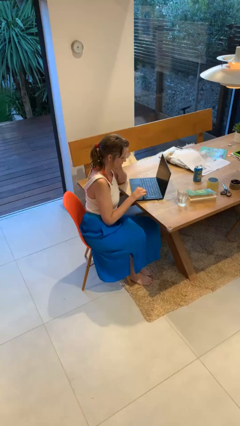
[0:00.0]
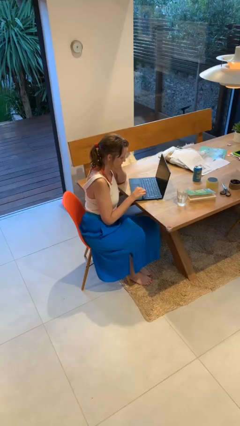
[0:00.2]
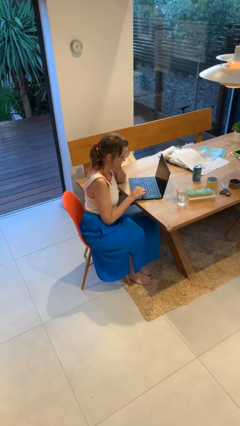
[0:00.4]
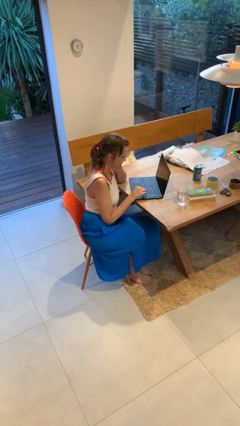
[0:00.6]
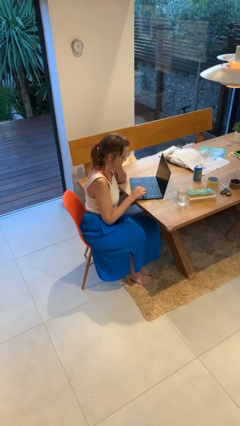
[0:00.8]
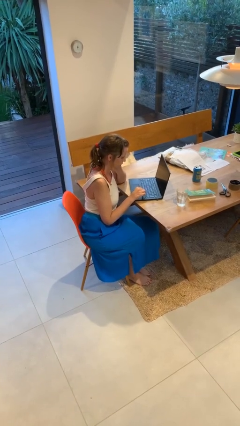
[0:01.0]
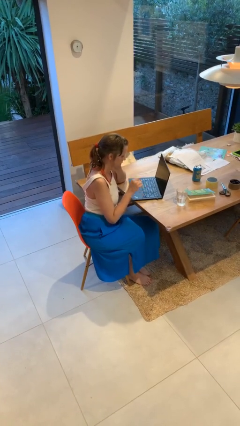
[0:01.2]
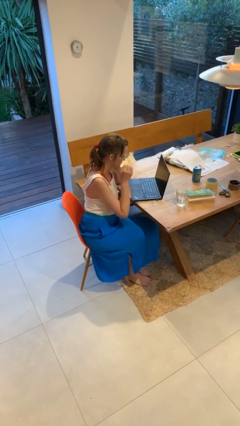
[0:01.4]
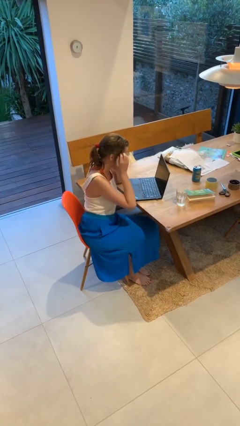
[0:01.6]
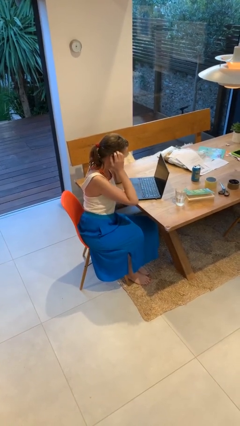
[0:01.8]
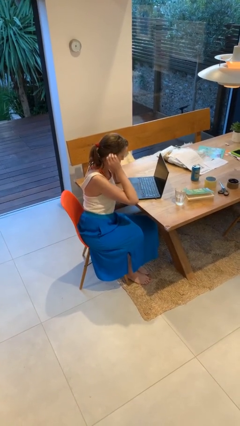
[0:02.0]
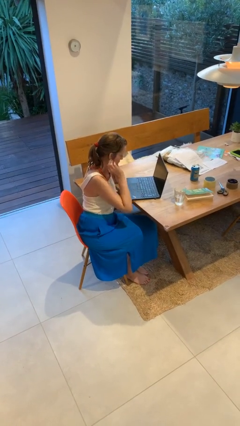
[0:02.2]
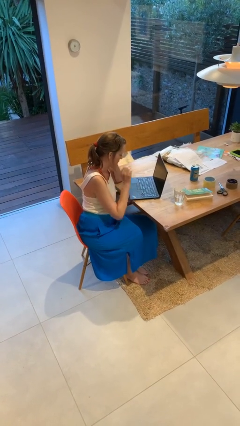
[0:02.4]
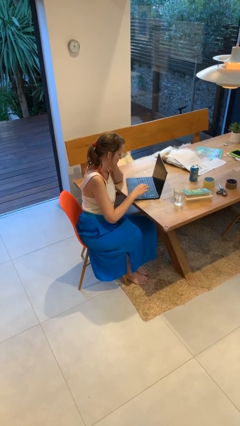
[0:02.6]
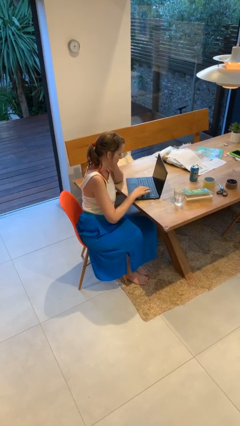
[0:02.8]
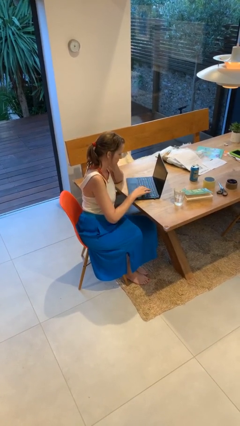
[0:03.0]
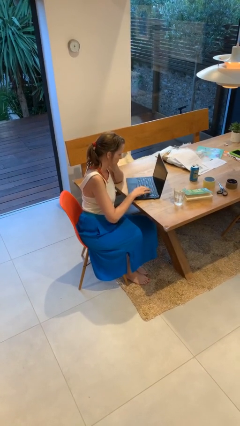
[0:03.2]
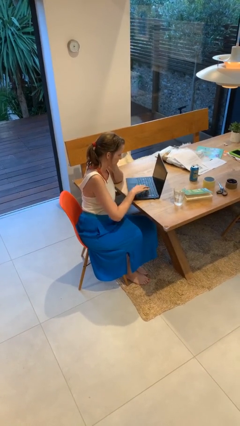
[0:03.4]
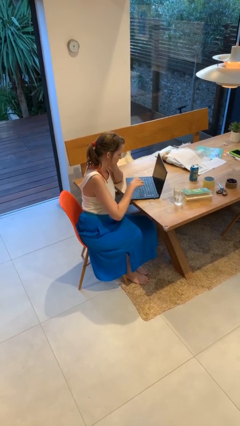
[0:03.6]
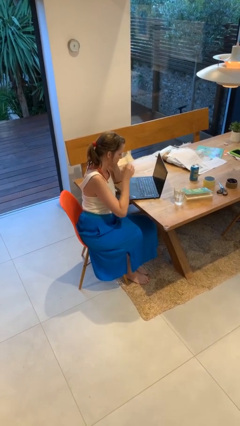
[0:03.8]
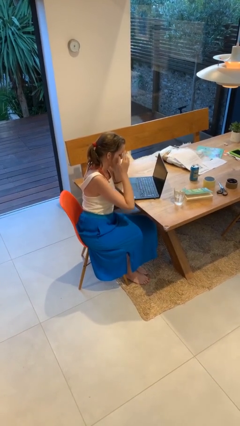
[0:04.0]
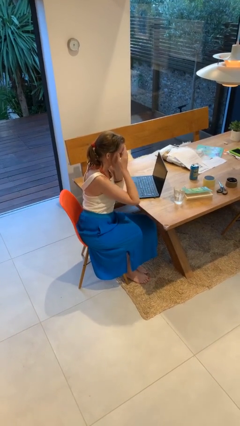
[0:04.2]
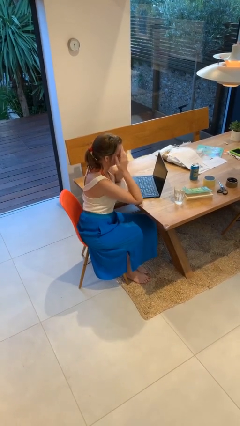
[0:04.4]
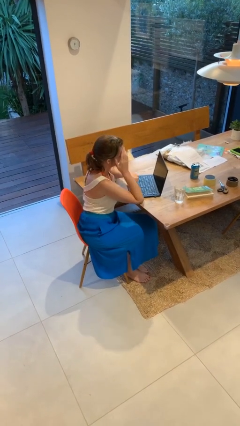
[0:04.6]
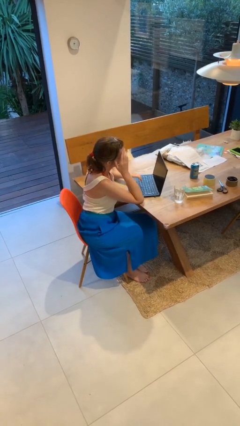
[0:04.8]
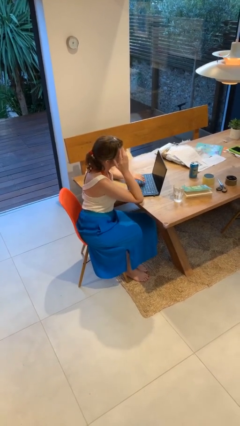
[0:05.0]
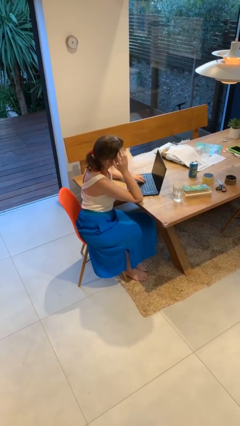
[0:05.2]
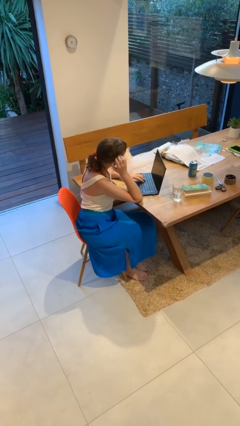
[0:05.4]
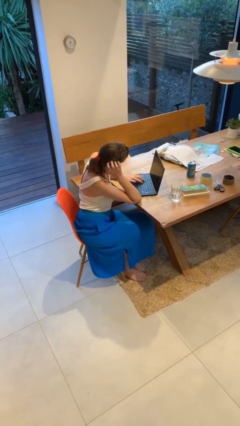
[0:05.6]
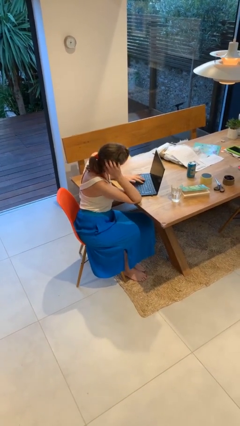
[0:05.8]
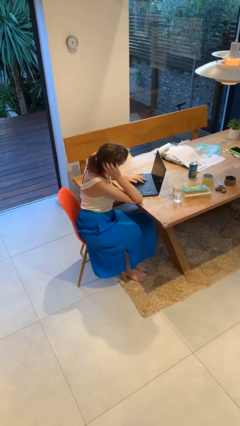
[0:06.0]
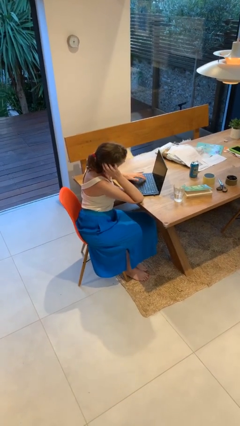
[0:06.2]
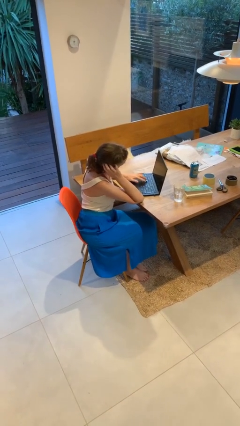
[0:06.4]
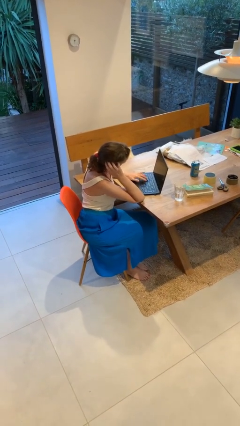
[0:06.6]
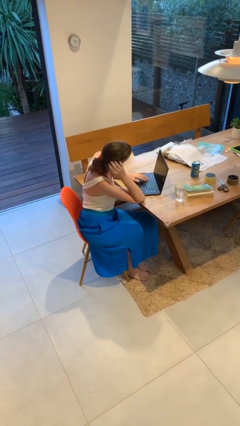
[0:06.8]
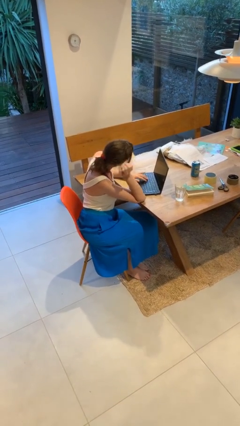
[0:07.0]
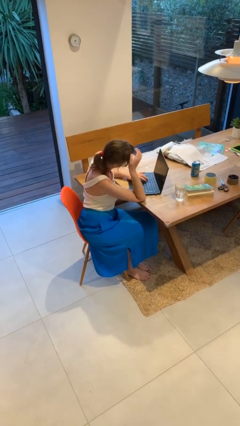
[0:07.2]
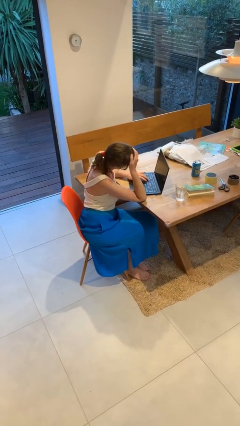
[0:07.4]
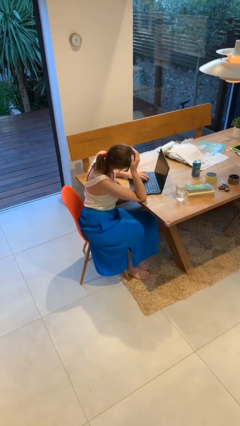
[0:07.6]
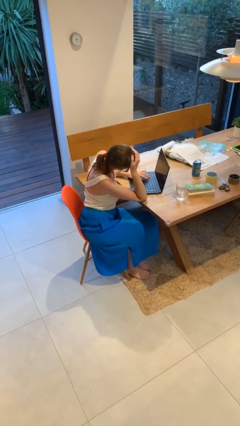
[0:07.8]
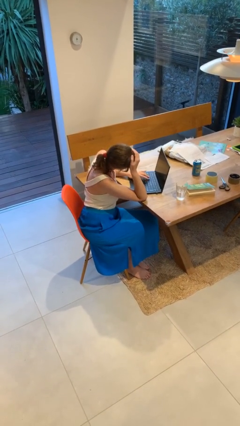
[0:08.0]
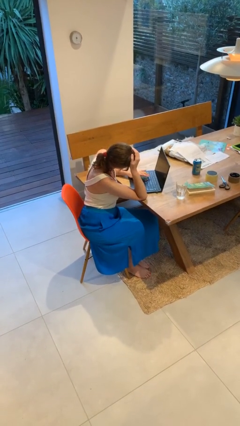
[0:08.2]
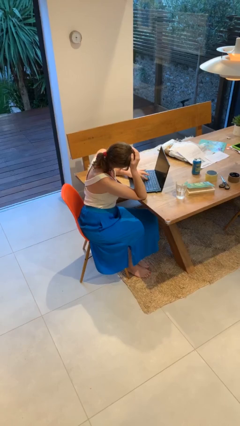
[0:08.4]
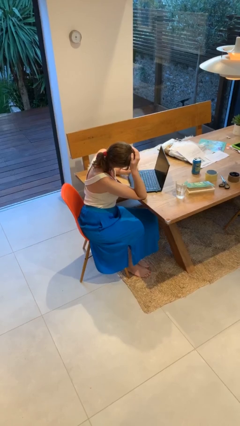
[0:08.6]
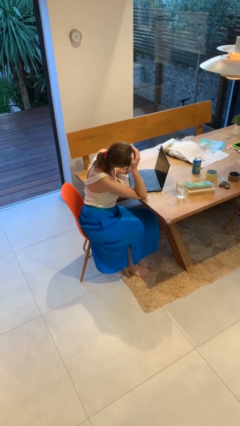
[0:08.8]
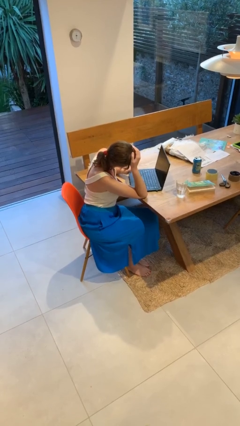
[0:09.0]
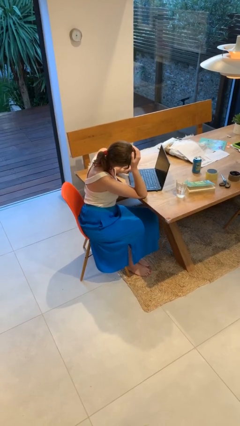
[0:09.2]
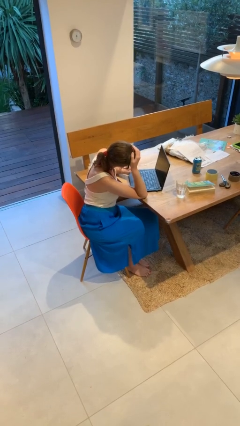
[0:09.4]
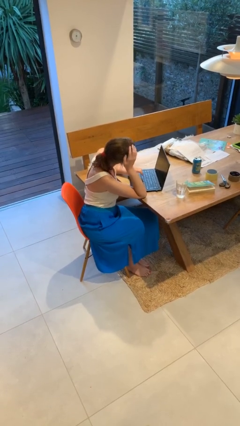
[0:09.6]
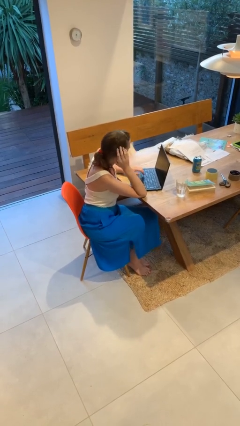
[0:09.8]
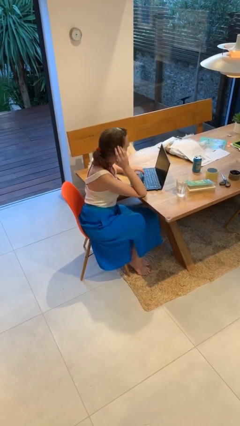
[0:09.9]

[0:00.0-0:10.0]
person interacts with laptop

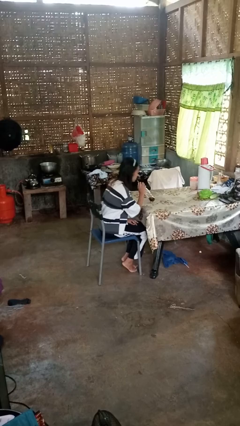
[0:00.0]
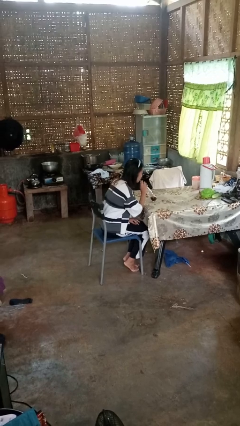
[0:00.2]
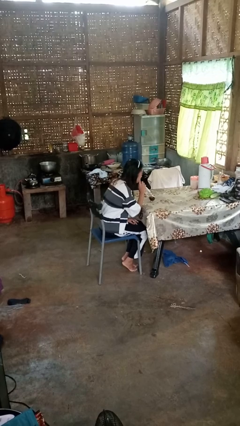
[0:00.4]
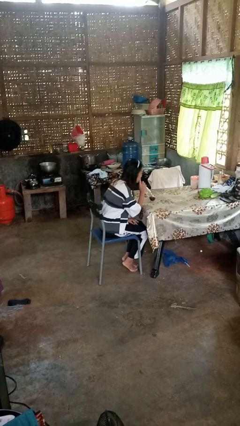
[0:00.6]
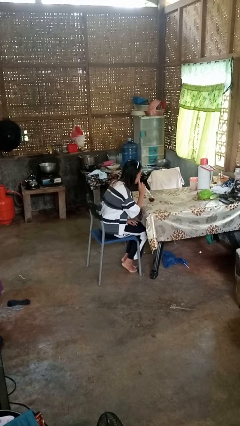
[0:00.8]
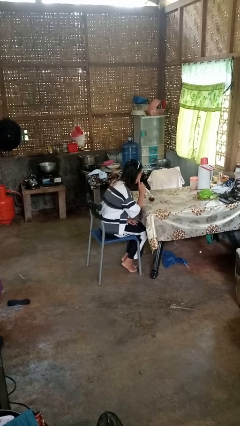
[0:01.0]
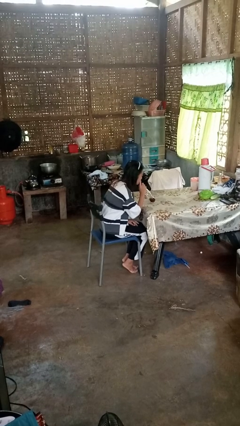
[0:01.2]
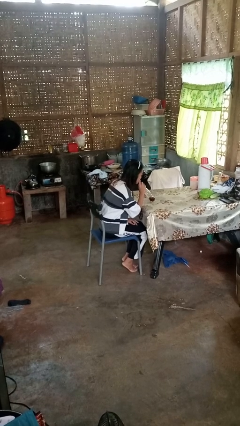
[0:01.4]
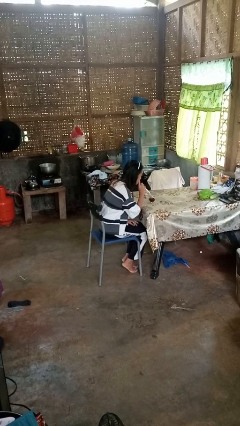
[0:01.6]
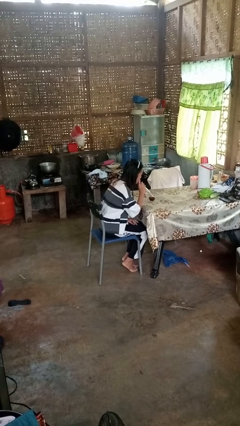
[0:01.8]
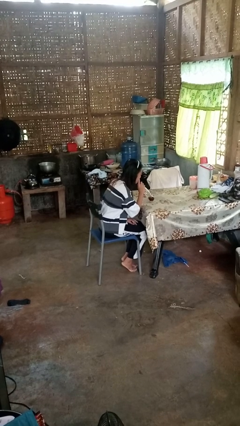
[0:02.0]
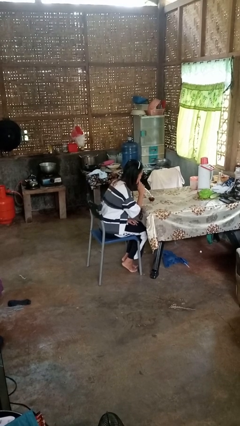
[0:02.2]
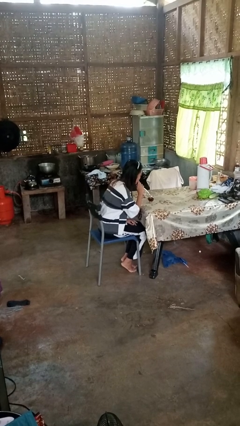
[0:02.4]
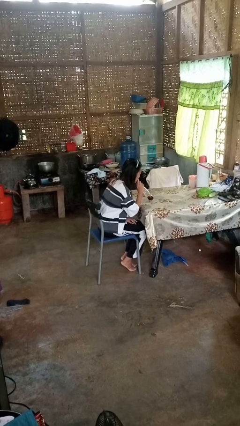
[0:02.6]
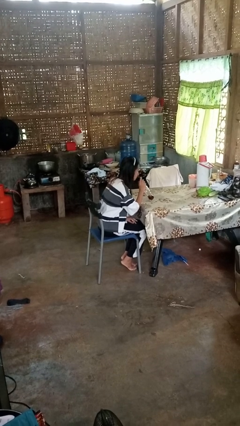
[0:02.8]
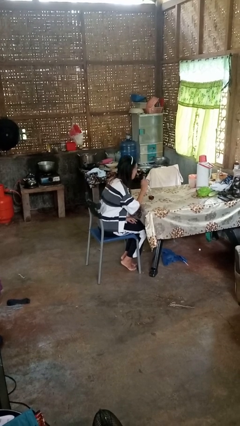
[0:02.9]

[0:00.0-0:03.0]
person drinks from straw

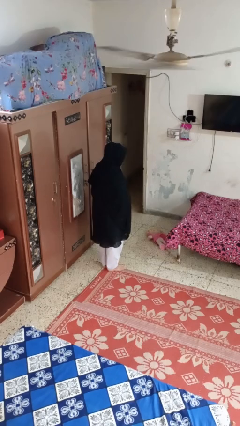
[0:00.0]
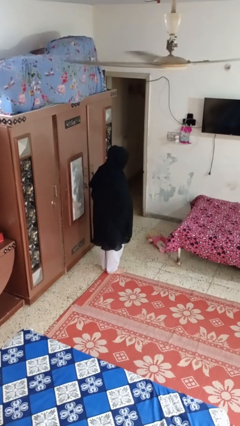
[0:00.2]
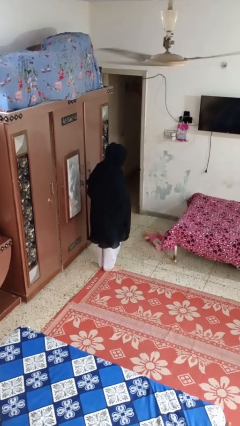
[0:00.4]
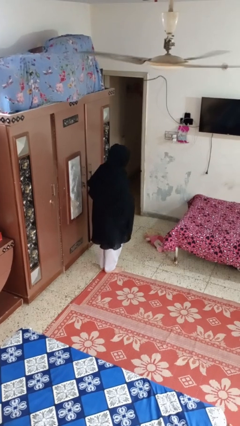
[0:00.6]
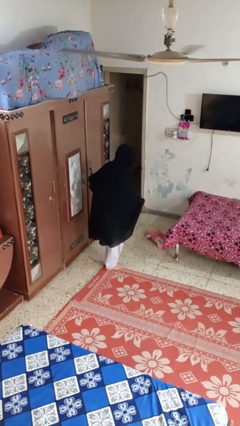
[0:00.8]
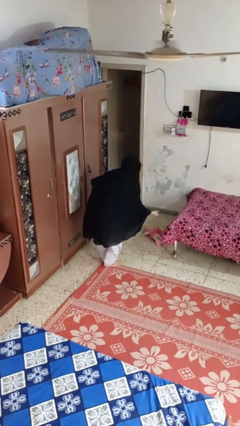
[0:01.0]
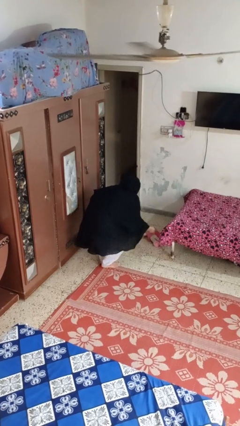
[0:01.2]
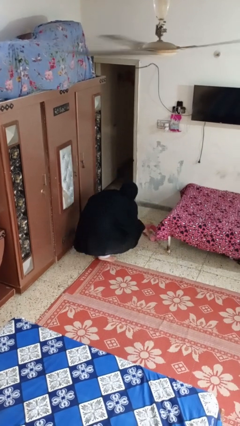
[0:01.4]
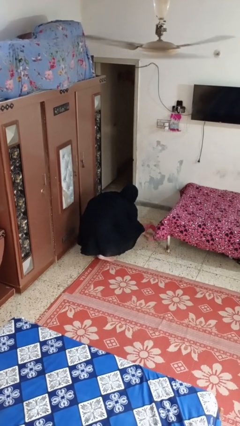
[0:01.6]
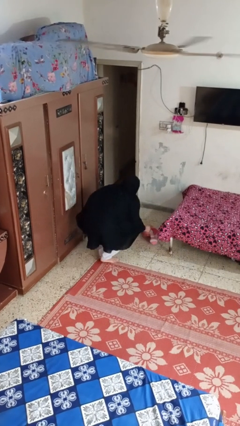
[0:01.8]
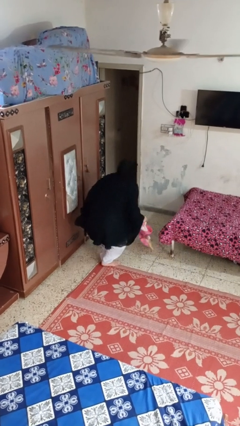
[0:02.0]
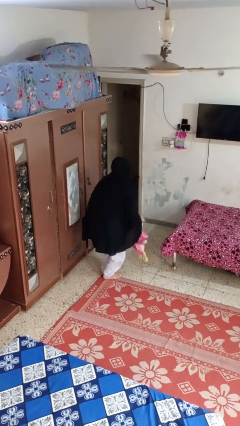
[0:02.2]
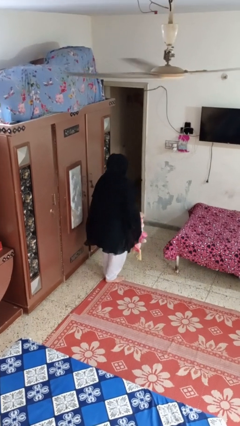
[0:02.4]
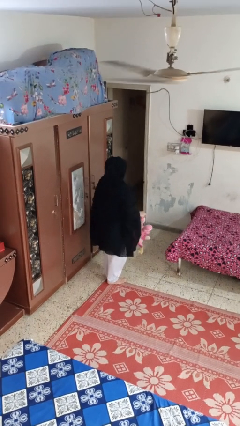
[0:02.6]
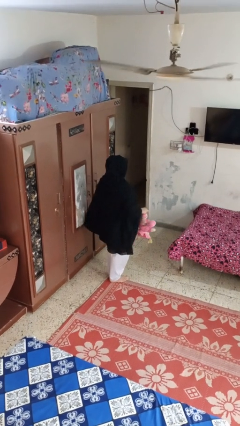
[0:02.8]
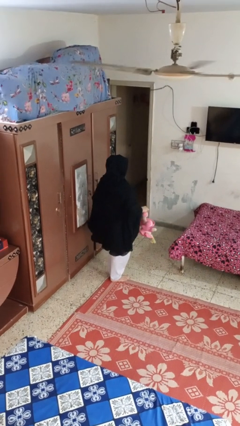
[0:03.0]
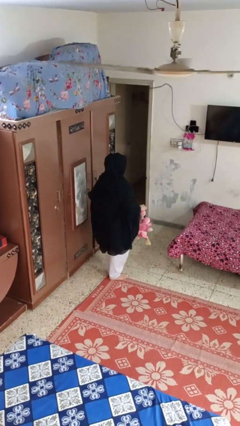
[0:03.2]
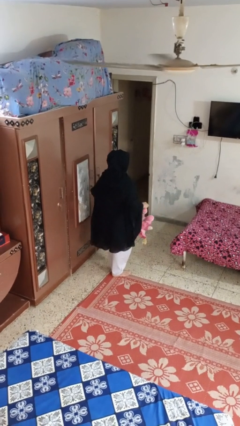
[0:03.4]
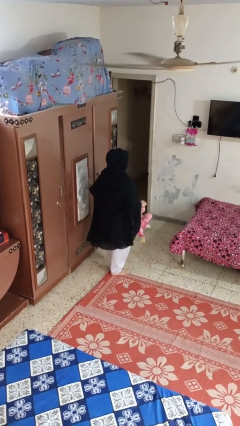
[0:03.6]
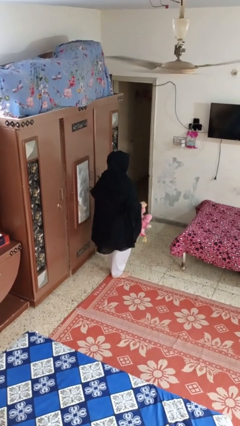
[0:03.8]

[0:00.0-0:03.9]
person picks up object from floor

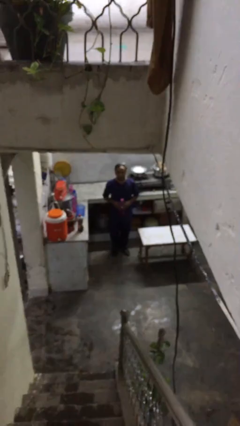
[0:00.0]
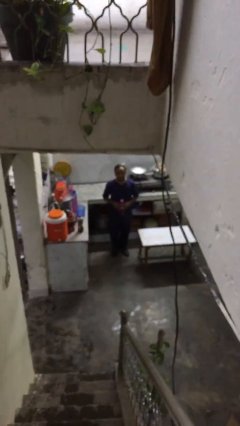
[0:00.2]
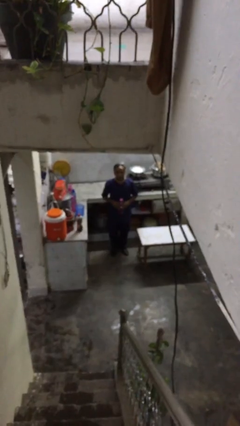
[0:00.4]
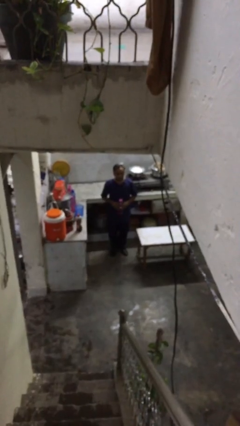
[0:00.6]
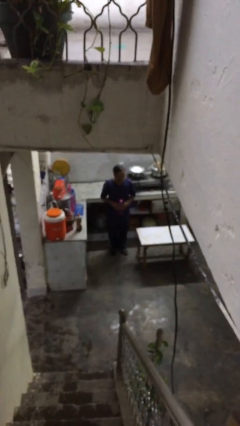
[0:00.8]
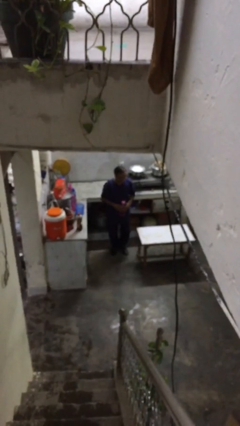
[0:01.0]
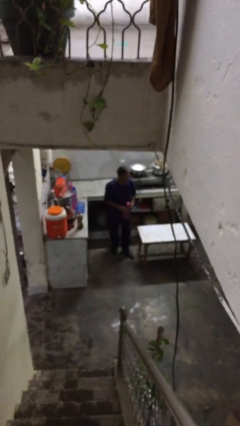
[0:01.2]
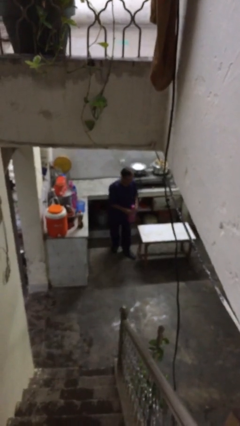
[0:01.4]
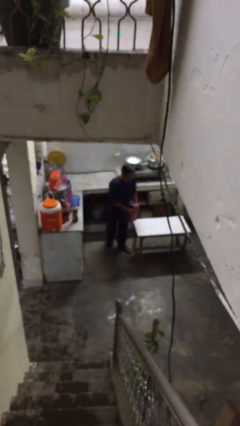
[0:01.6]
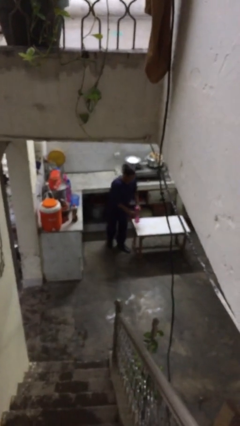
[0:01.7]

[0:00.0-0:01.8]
person puts down object on table
